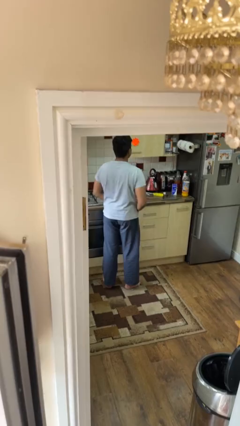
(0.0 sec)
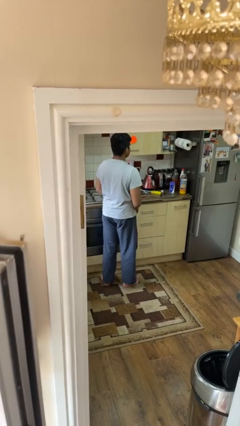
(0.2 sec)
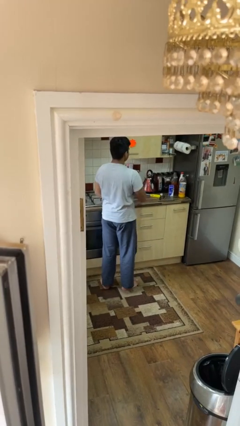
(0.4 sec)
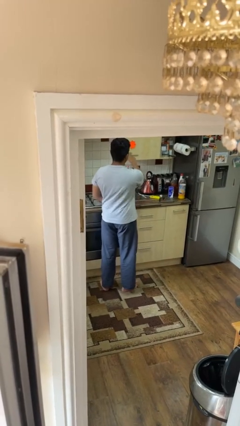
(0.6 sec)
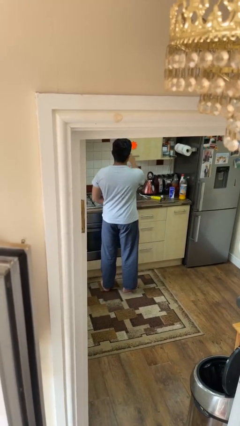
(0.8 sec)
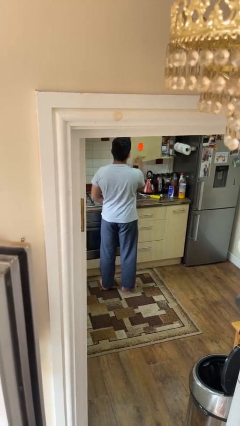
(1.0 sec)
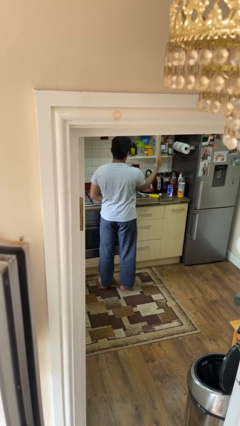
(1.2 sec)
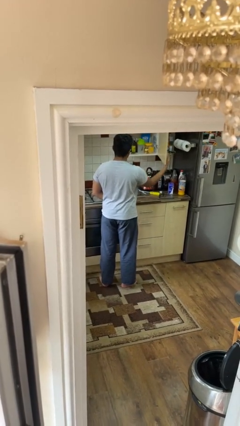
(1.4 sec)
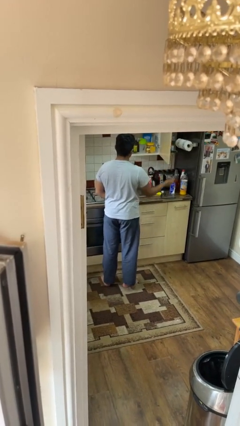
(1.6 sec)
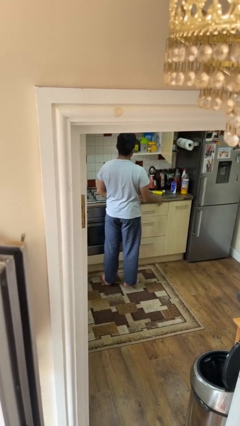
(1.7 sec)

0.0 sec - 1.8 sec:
person opens cabinet

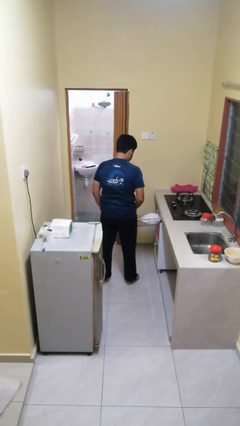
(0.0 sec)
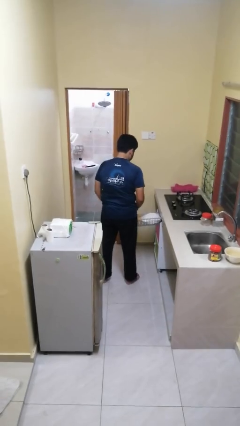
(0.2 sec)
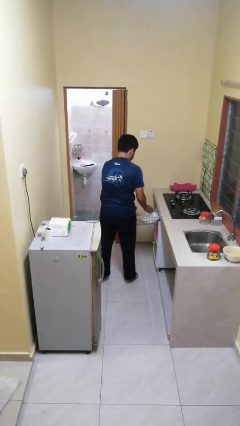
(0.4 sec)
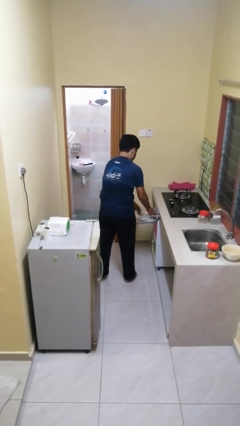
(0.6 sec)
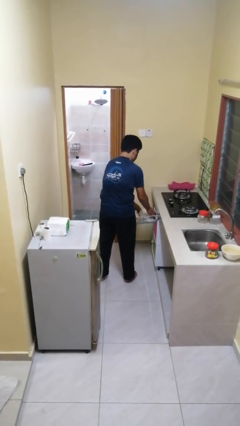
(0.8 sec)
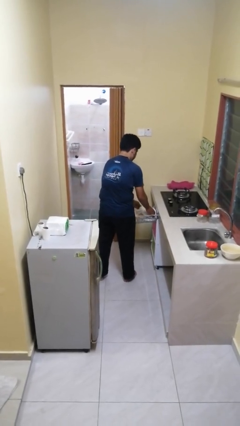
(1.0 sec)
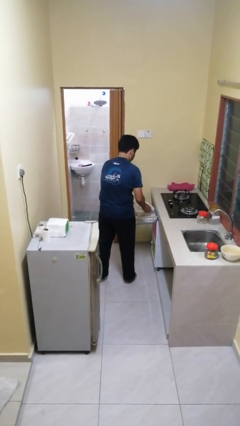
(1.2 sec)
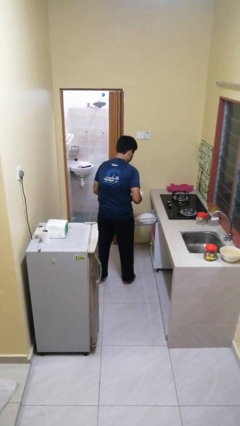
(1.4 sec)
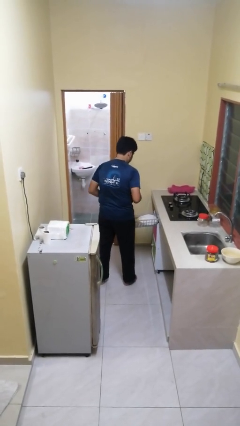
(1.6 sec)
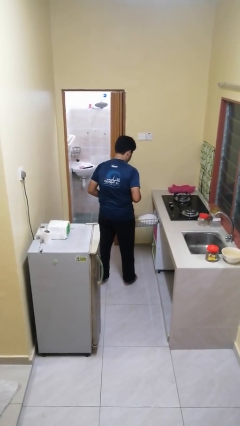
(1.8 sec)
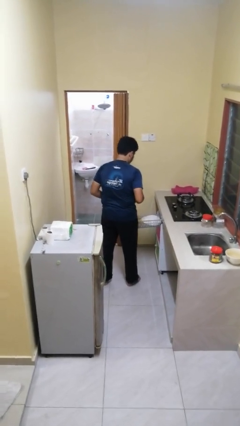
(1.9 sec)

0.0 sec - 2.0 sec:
person takes object from kitchen drawer

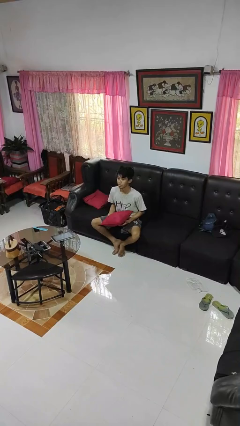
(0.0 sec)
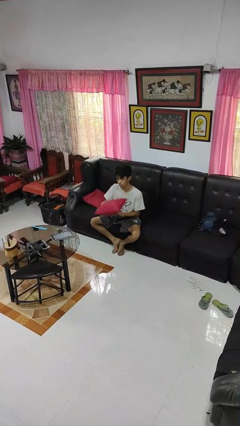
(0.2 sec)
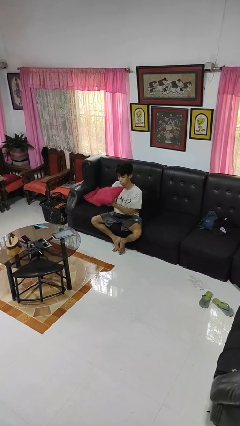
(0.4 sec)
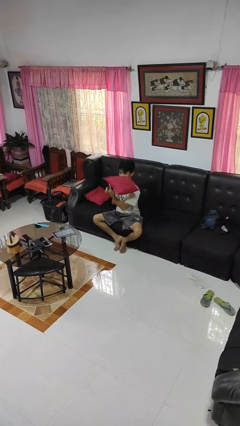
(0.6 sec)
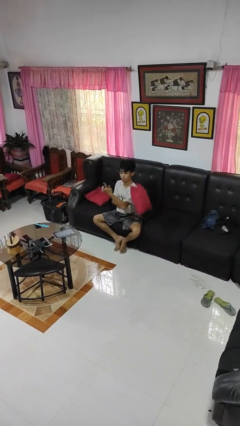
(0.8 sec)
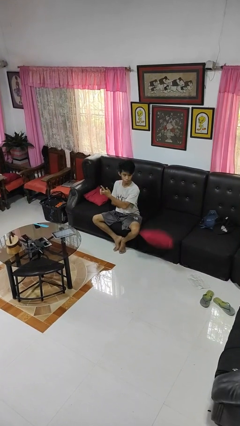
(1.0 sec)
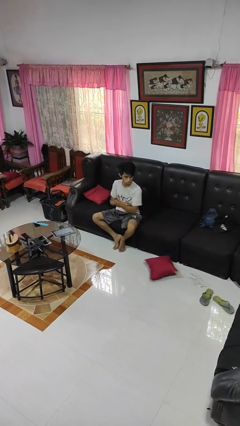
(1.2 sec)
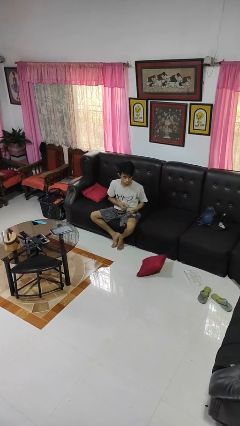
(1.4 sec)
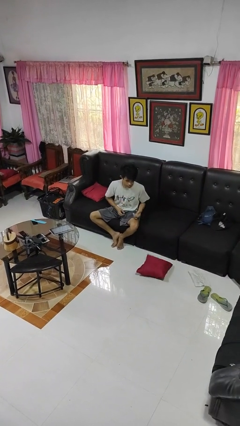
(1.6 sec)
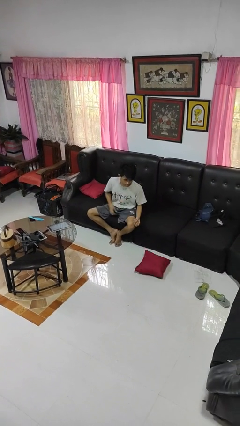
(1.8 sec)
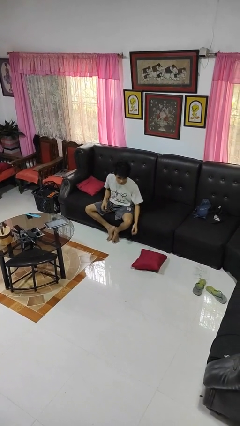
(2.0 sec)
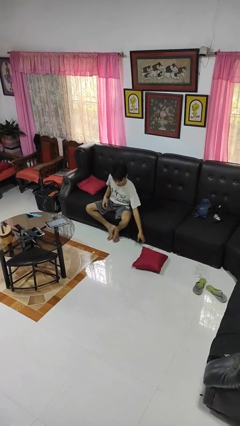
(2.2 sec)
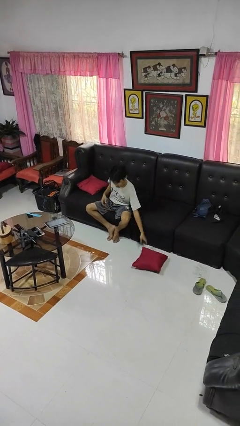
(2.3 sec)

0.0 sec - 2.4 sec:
person drops object

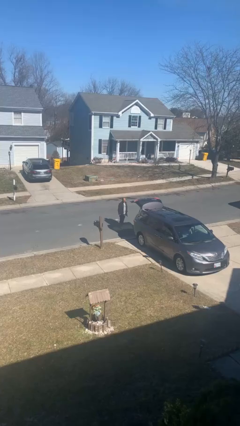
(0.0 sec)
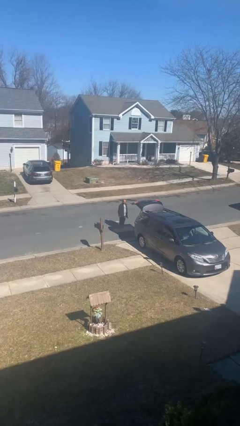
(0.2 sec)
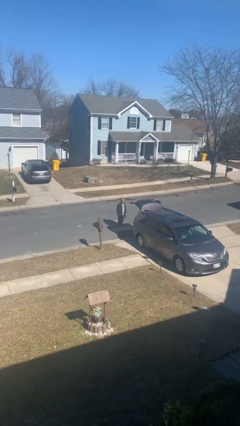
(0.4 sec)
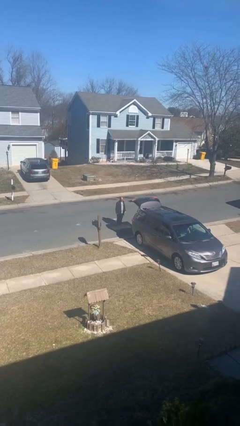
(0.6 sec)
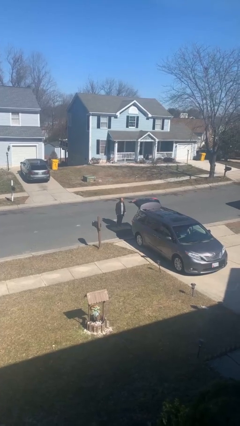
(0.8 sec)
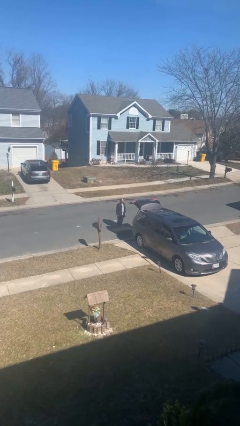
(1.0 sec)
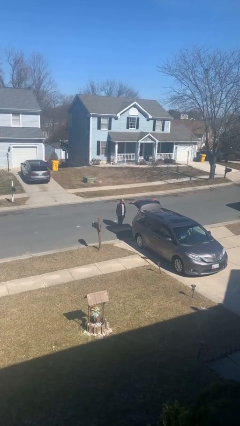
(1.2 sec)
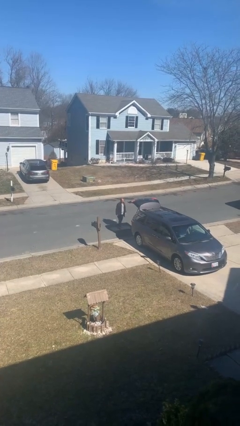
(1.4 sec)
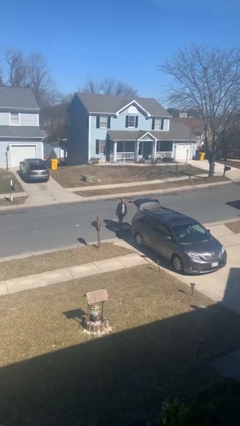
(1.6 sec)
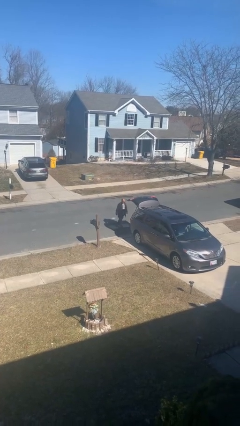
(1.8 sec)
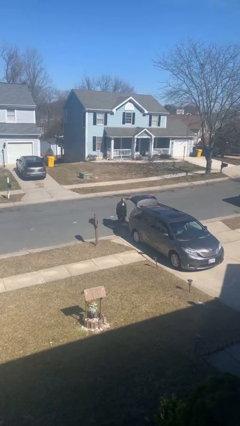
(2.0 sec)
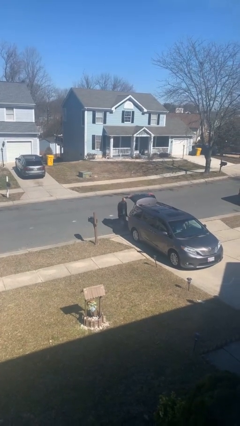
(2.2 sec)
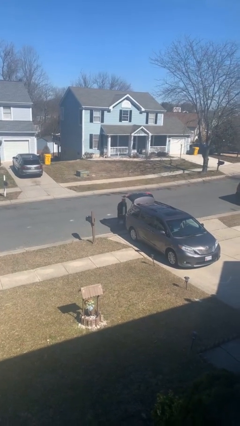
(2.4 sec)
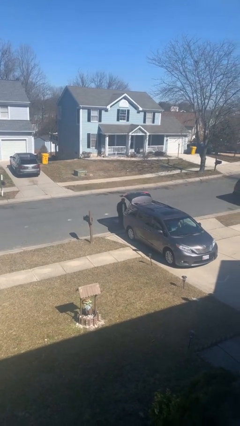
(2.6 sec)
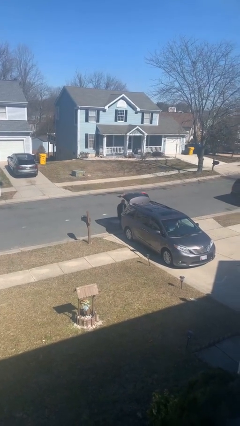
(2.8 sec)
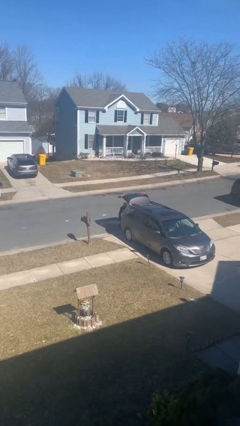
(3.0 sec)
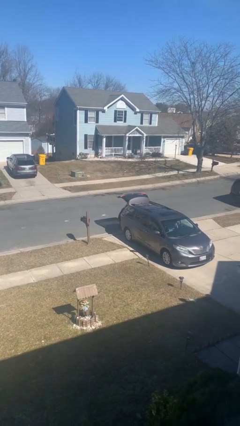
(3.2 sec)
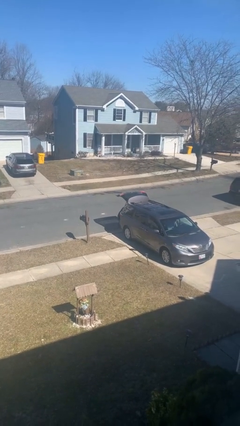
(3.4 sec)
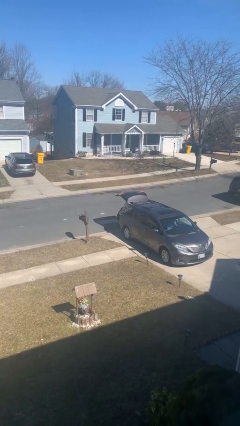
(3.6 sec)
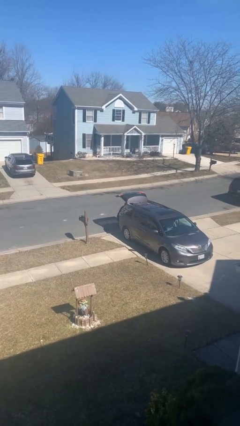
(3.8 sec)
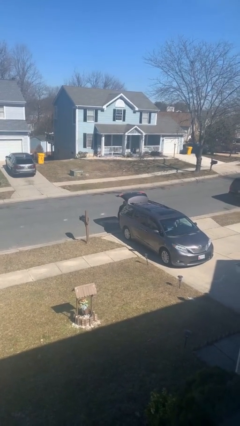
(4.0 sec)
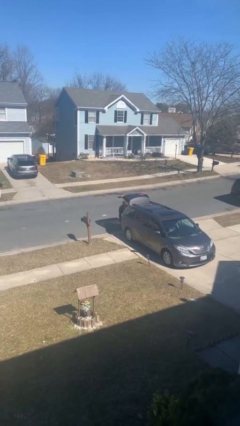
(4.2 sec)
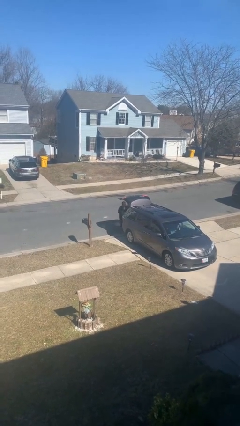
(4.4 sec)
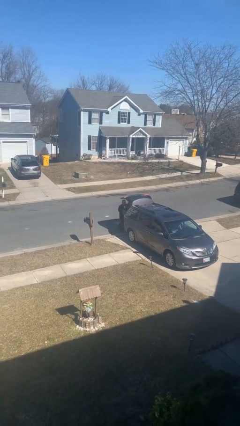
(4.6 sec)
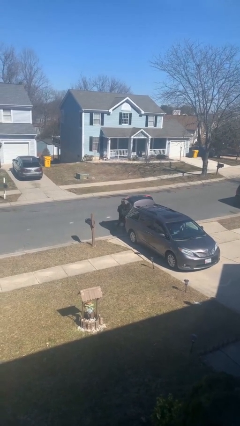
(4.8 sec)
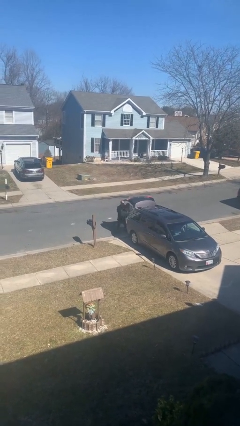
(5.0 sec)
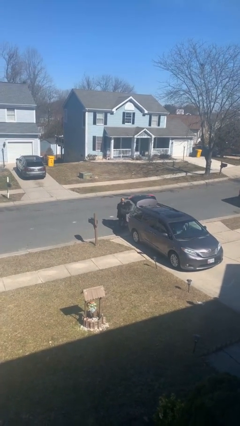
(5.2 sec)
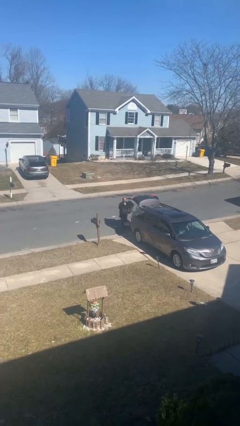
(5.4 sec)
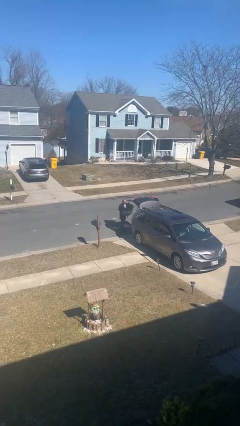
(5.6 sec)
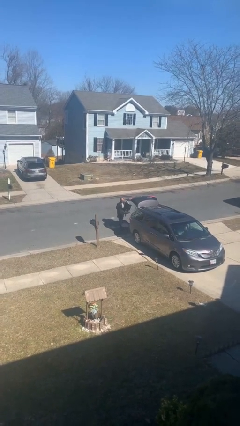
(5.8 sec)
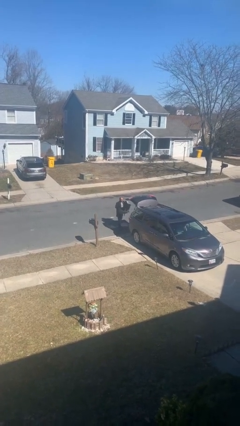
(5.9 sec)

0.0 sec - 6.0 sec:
person unloads car

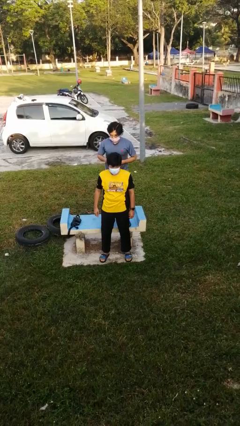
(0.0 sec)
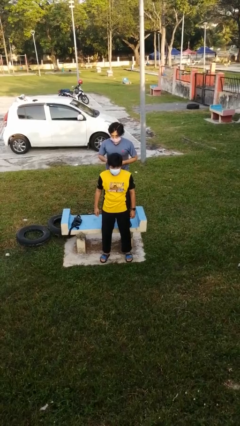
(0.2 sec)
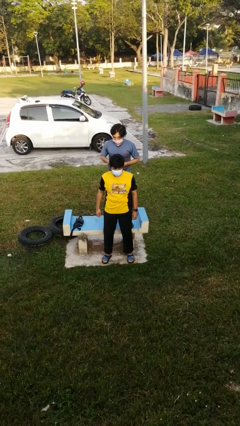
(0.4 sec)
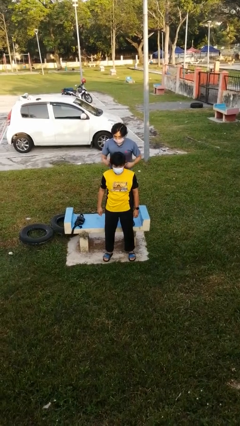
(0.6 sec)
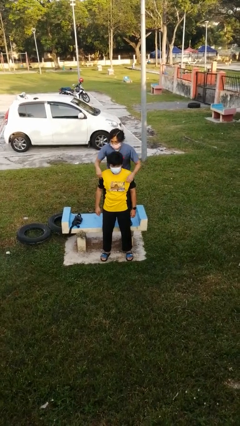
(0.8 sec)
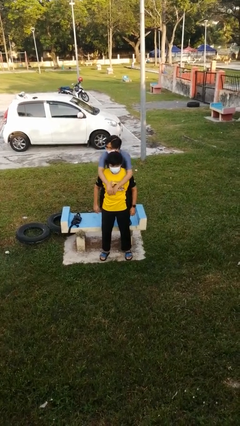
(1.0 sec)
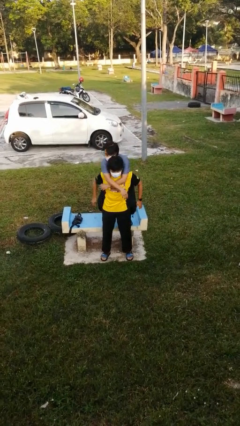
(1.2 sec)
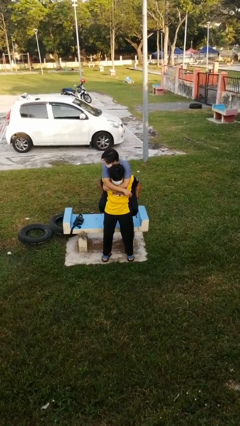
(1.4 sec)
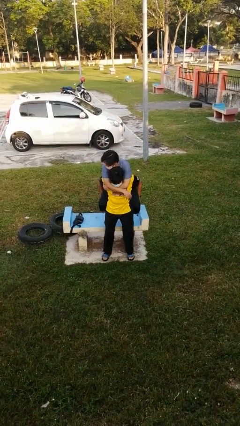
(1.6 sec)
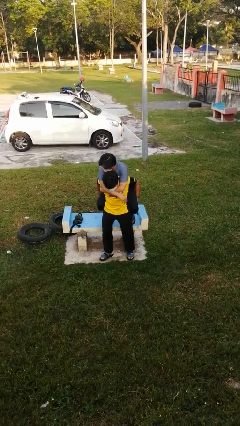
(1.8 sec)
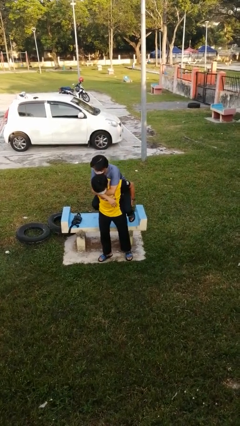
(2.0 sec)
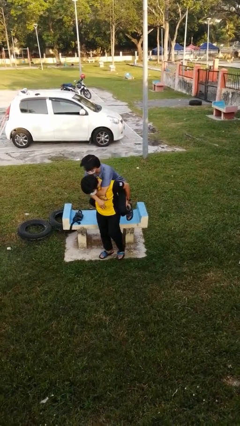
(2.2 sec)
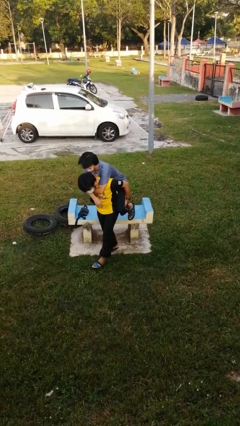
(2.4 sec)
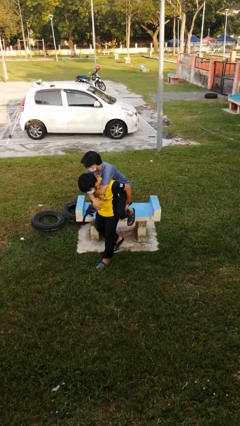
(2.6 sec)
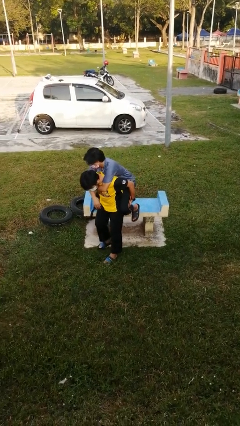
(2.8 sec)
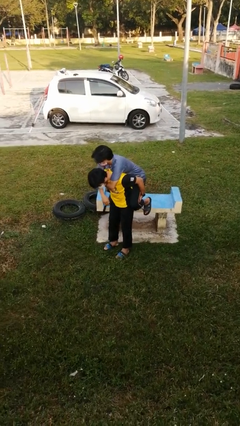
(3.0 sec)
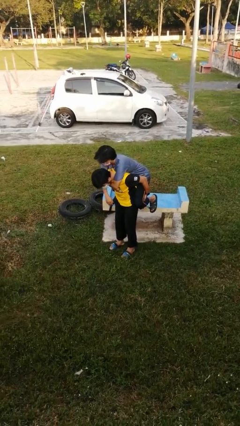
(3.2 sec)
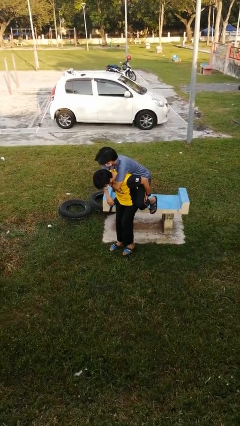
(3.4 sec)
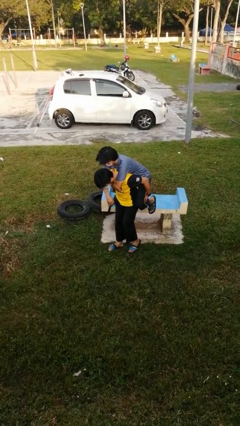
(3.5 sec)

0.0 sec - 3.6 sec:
person carries person over shoulder

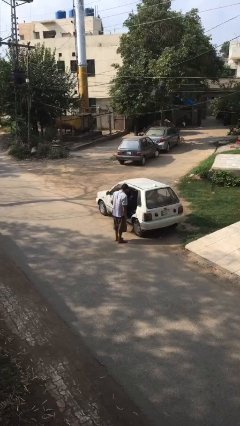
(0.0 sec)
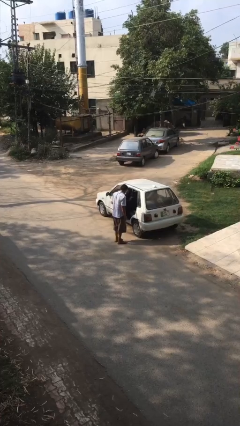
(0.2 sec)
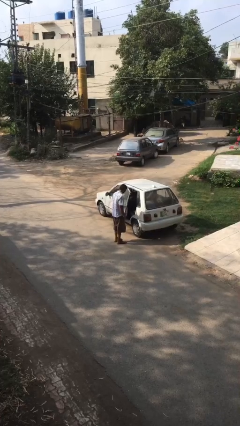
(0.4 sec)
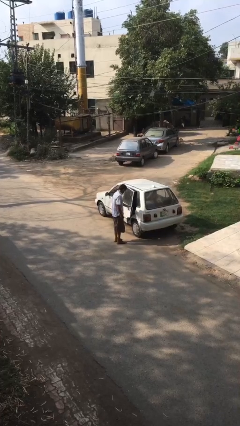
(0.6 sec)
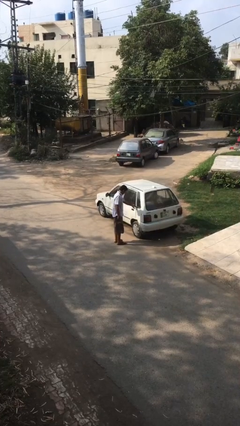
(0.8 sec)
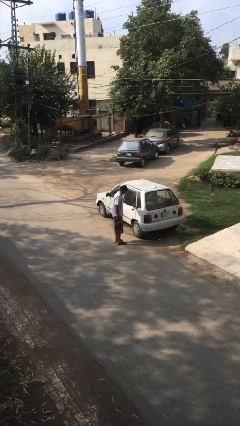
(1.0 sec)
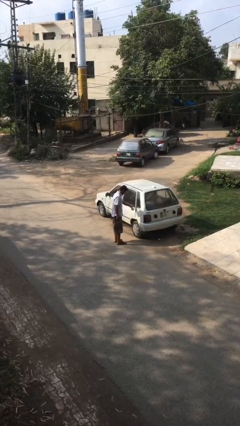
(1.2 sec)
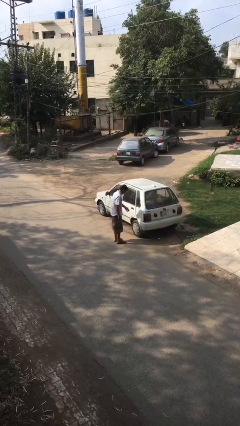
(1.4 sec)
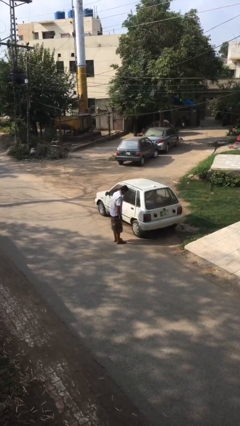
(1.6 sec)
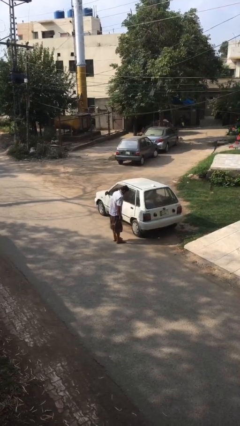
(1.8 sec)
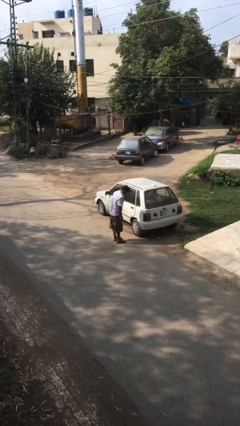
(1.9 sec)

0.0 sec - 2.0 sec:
person closes car door
